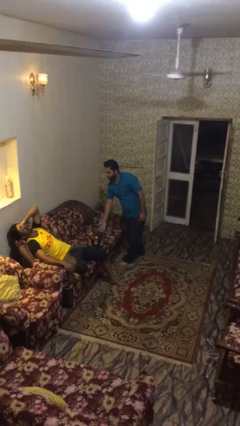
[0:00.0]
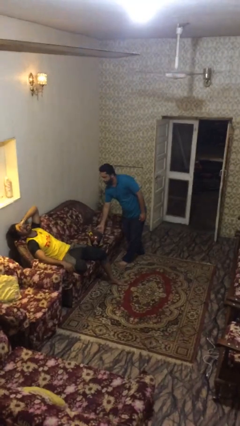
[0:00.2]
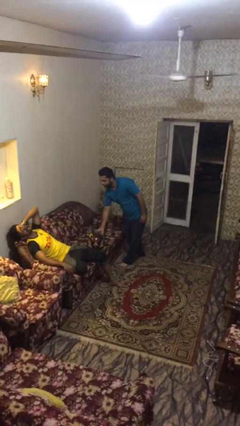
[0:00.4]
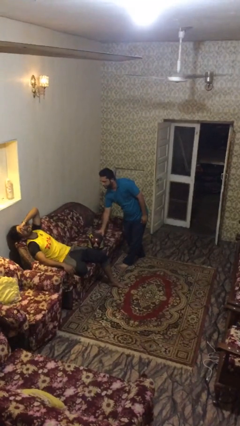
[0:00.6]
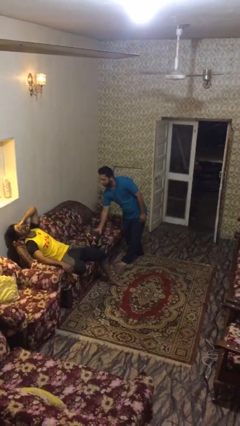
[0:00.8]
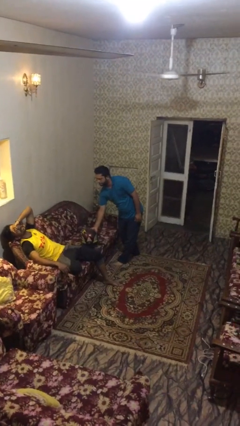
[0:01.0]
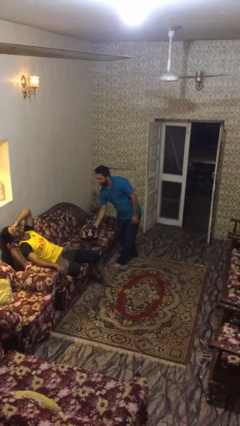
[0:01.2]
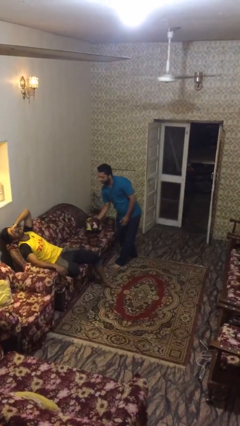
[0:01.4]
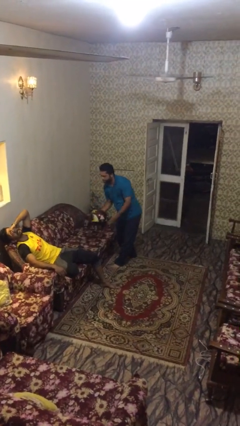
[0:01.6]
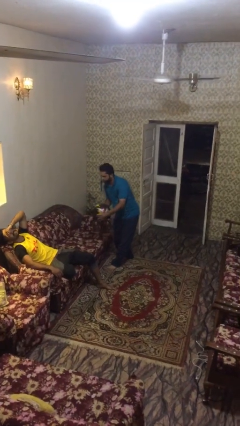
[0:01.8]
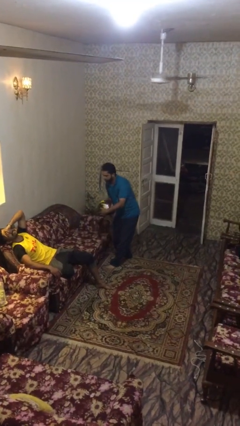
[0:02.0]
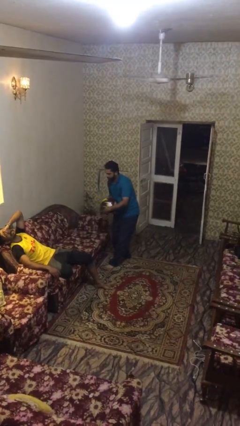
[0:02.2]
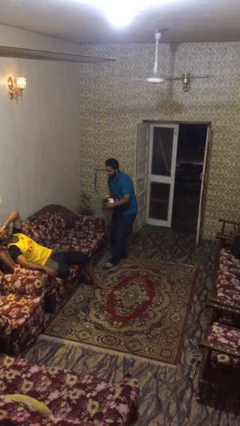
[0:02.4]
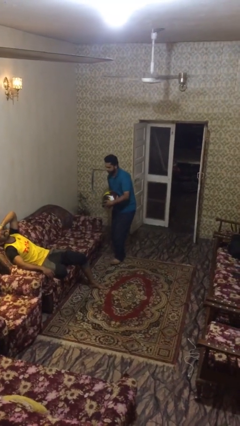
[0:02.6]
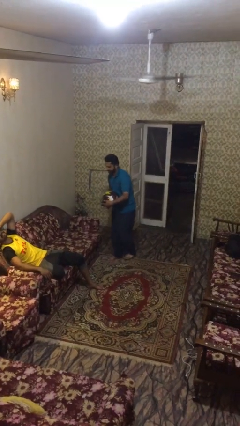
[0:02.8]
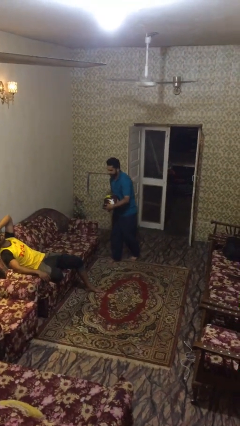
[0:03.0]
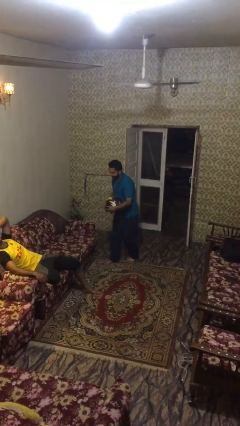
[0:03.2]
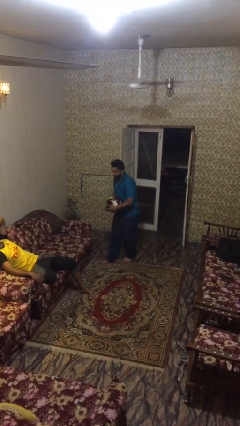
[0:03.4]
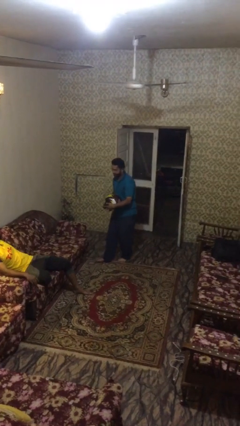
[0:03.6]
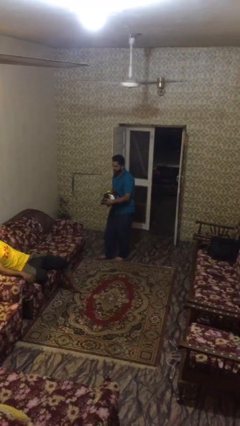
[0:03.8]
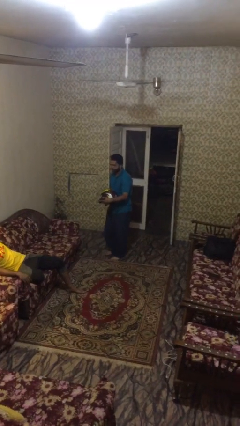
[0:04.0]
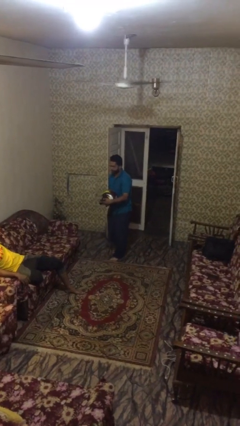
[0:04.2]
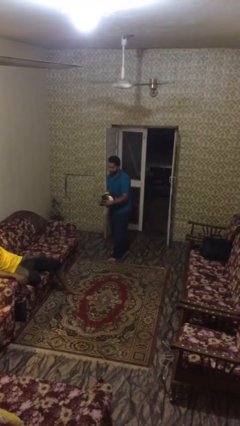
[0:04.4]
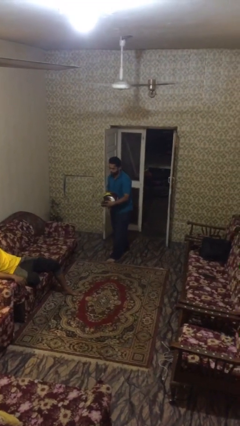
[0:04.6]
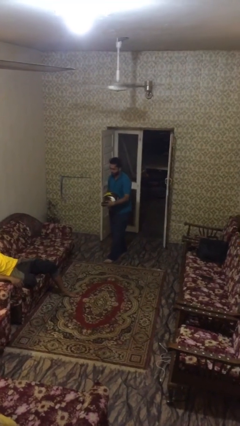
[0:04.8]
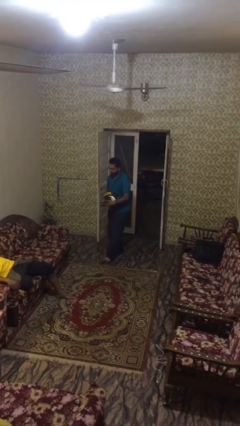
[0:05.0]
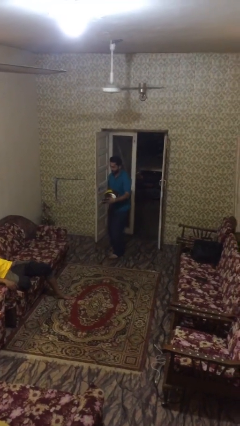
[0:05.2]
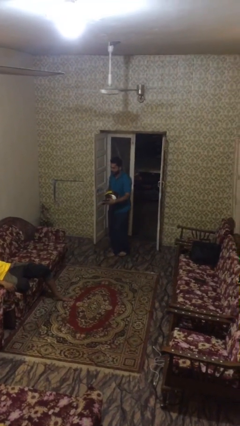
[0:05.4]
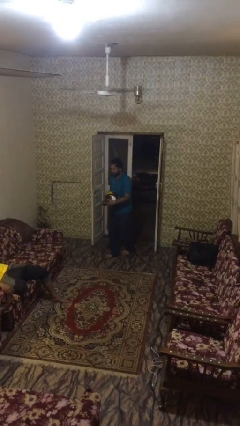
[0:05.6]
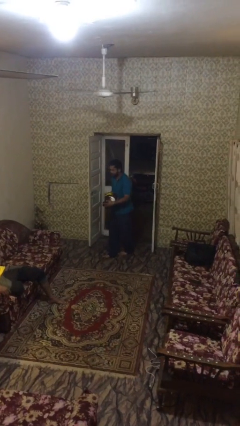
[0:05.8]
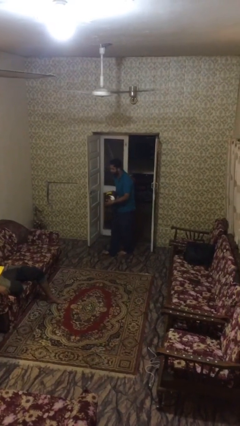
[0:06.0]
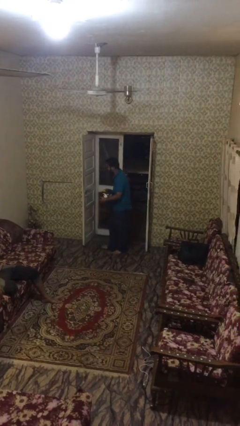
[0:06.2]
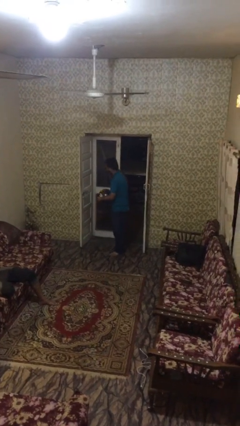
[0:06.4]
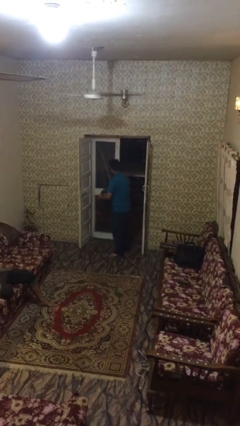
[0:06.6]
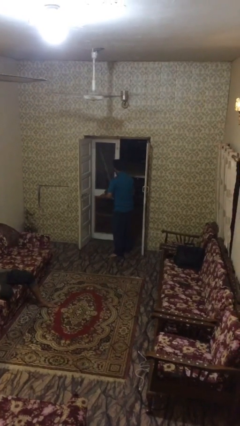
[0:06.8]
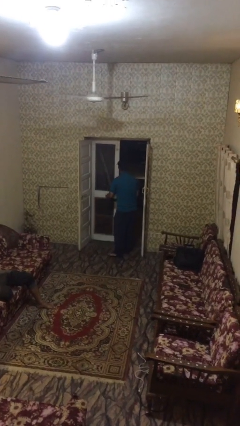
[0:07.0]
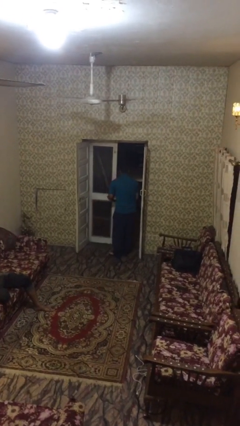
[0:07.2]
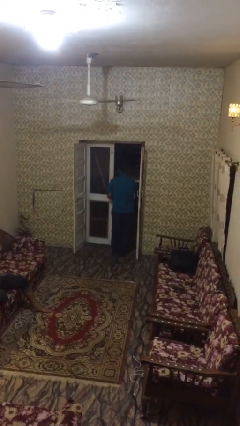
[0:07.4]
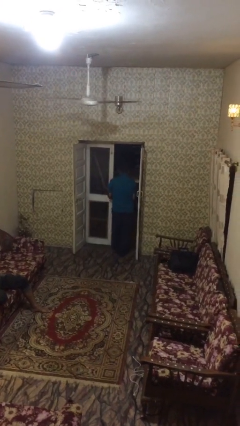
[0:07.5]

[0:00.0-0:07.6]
person steals object from person

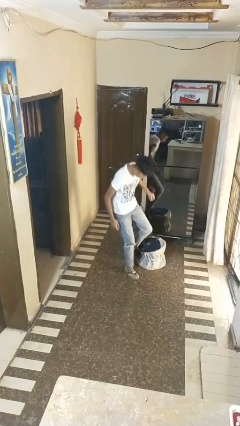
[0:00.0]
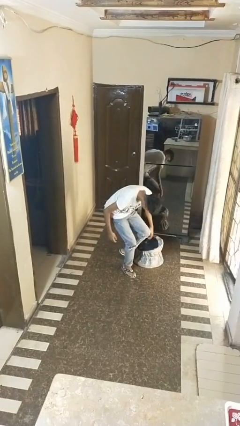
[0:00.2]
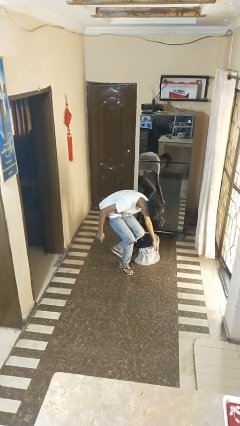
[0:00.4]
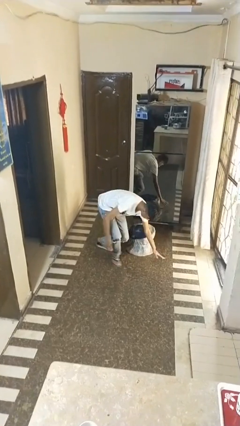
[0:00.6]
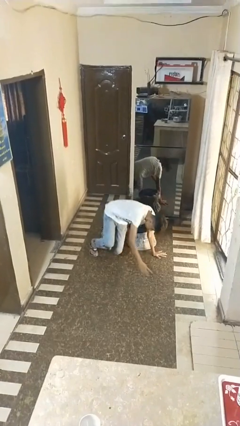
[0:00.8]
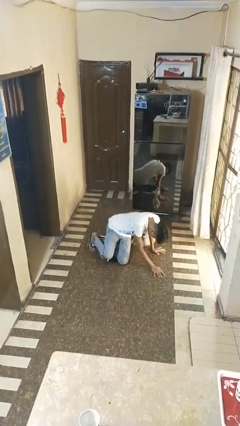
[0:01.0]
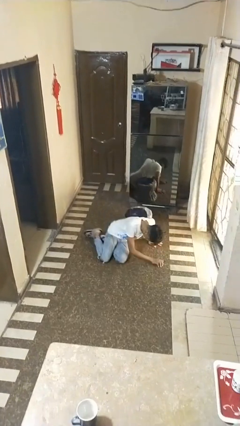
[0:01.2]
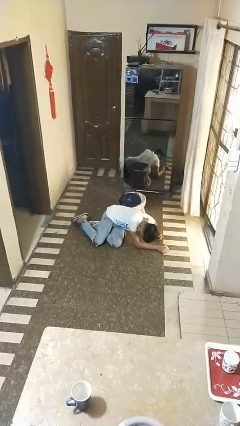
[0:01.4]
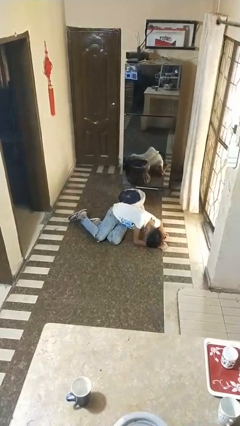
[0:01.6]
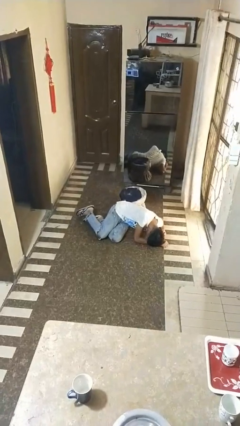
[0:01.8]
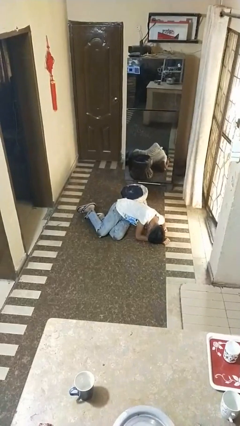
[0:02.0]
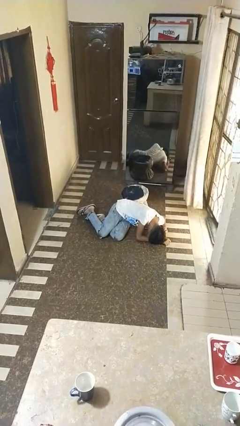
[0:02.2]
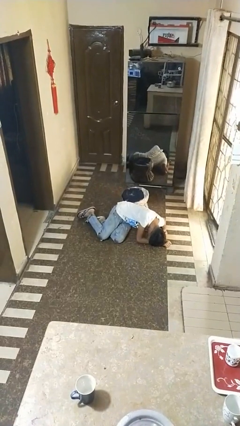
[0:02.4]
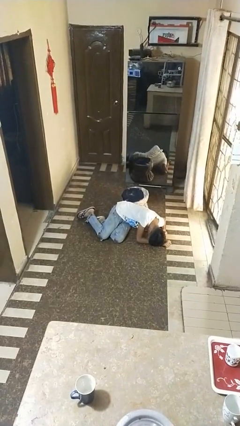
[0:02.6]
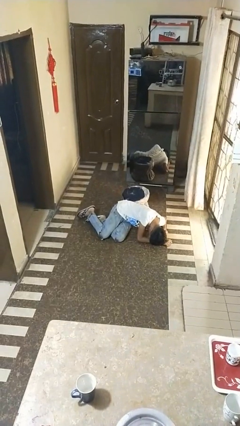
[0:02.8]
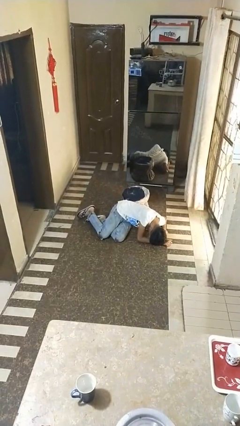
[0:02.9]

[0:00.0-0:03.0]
person lies down on floor

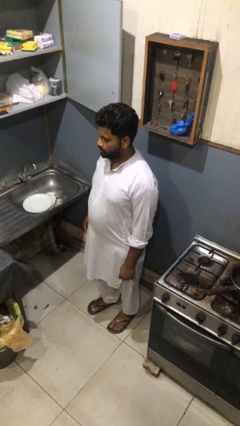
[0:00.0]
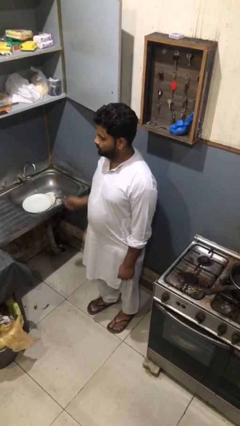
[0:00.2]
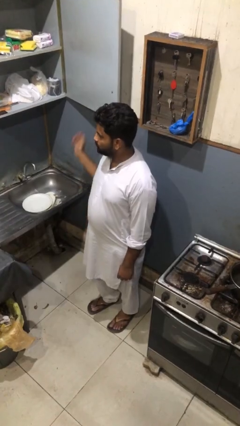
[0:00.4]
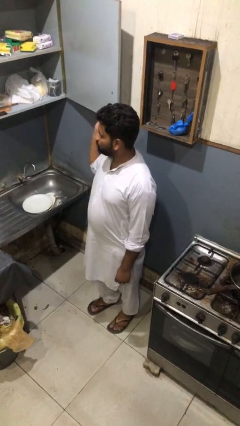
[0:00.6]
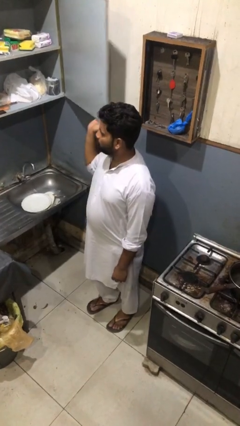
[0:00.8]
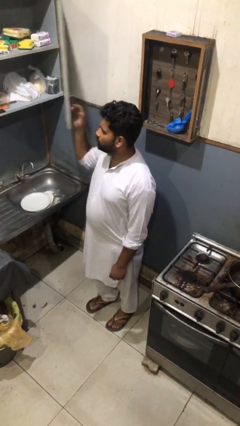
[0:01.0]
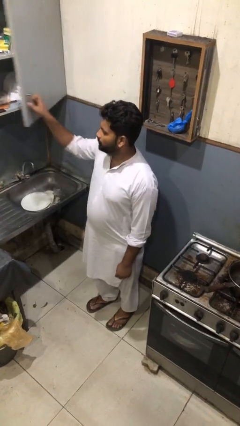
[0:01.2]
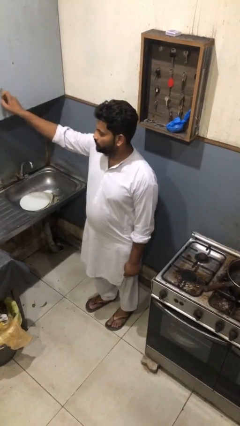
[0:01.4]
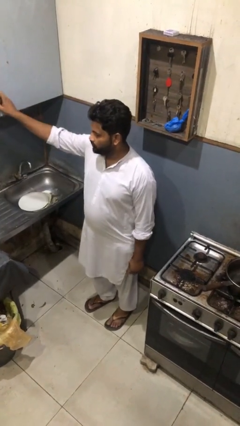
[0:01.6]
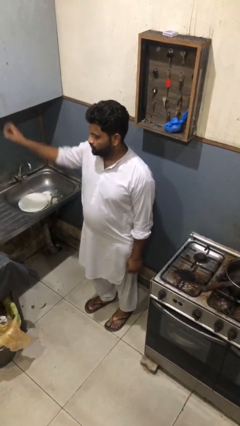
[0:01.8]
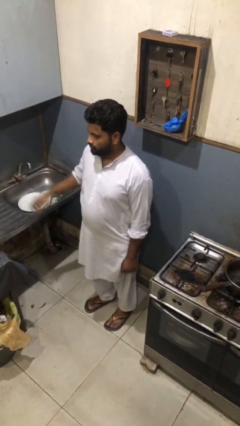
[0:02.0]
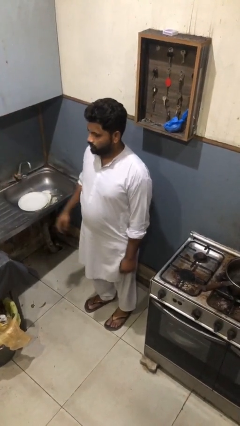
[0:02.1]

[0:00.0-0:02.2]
person closes cabinet

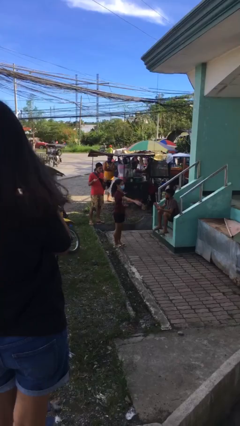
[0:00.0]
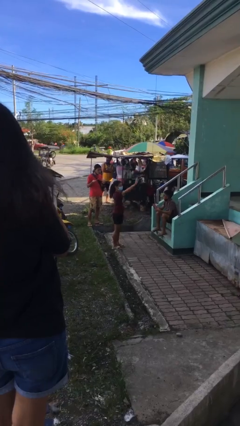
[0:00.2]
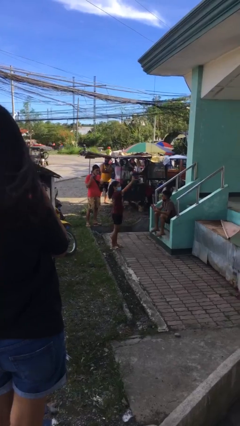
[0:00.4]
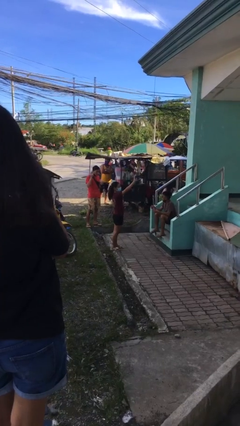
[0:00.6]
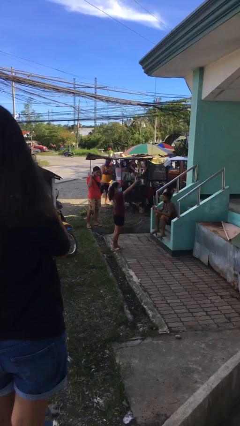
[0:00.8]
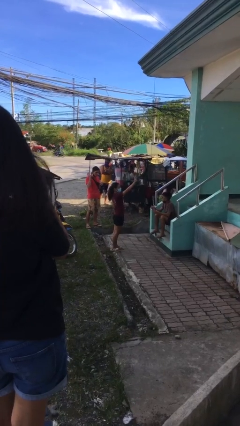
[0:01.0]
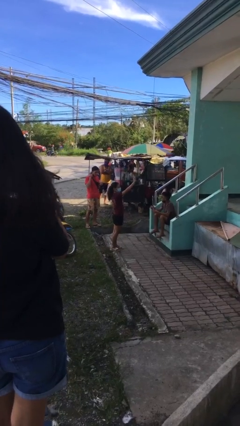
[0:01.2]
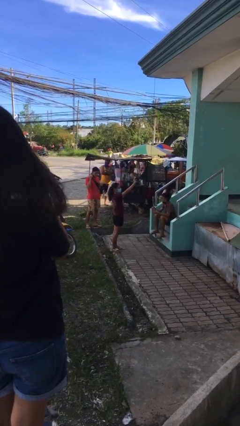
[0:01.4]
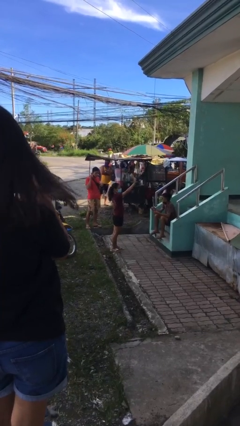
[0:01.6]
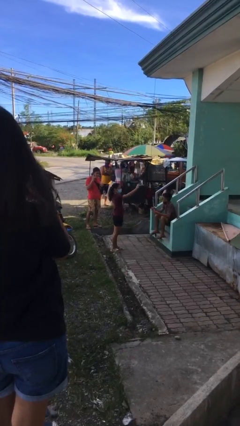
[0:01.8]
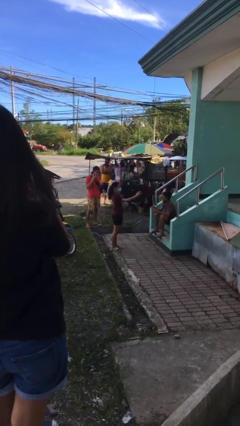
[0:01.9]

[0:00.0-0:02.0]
person waves at person

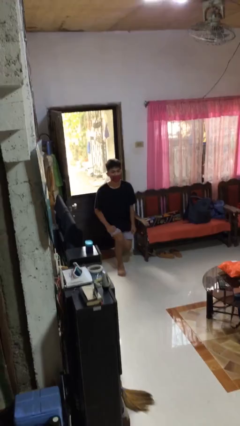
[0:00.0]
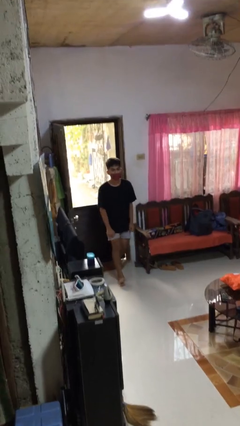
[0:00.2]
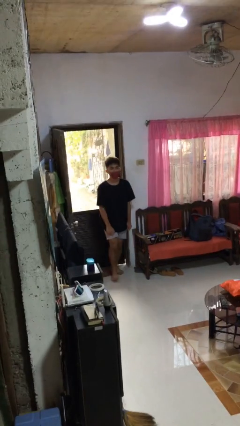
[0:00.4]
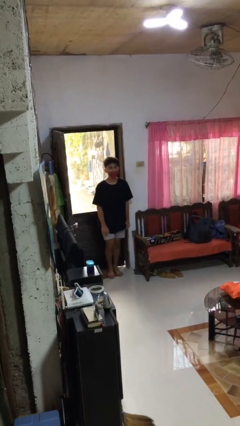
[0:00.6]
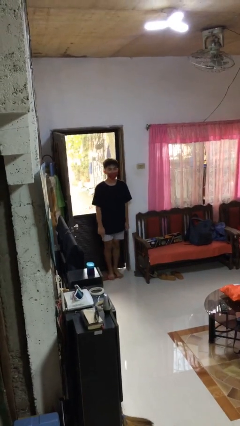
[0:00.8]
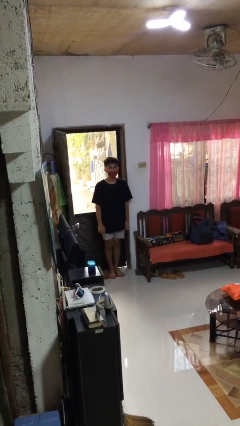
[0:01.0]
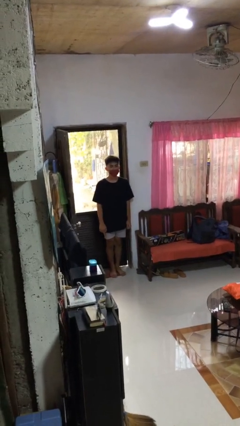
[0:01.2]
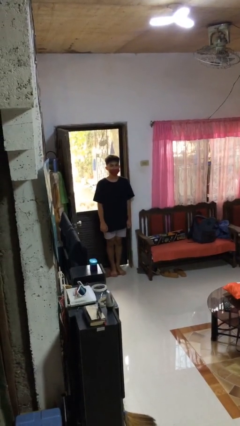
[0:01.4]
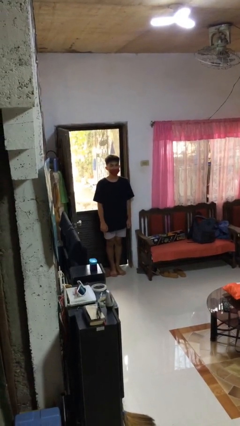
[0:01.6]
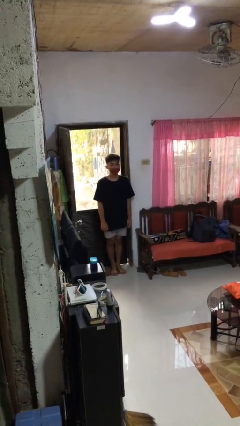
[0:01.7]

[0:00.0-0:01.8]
person stands up from floor

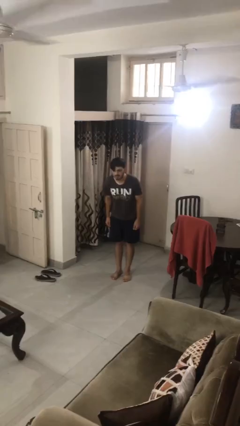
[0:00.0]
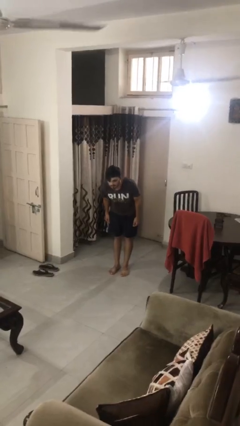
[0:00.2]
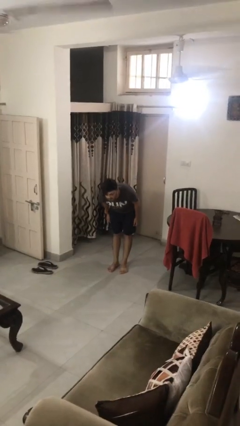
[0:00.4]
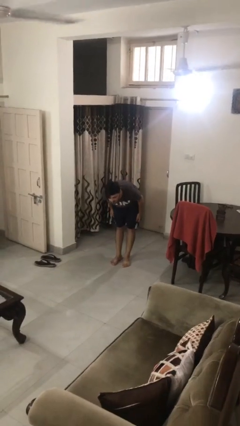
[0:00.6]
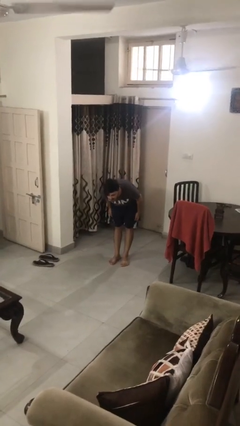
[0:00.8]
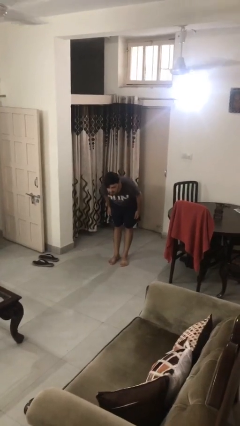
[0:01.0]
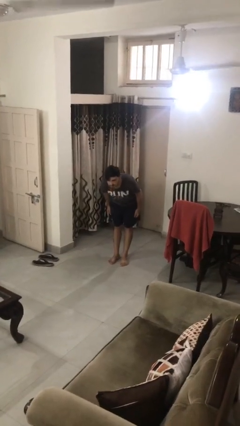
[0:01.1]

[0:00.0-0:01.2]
person bows
